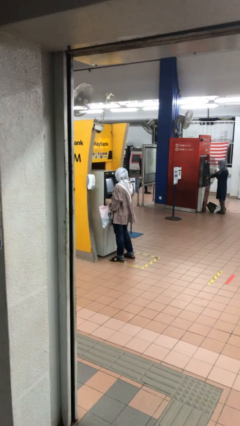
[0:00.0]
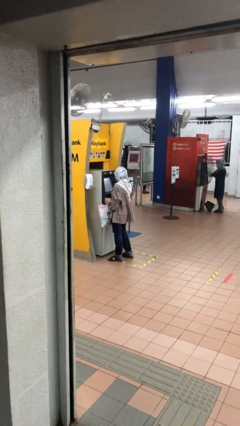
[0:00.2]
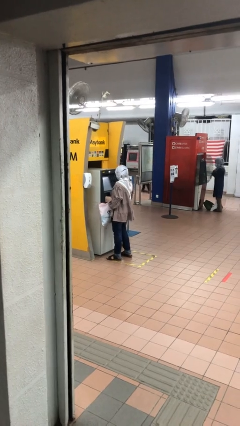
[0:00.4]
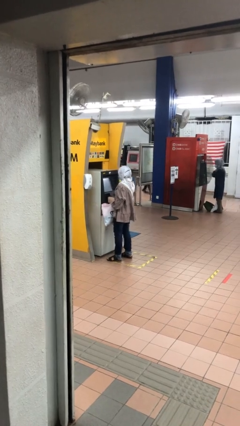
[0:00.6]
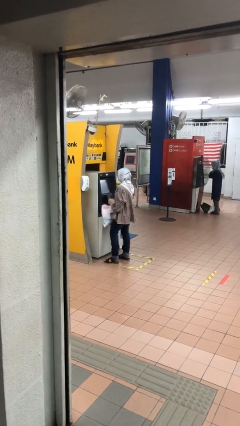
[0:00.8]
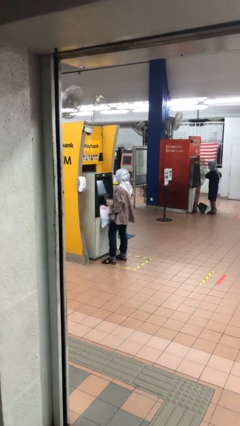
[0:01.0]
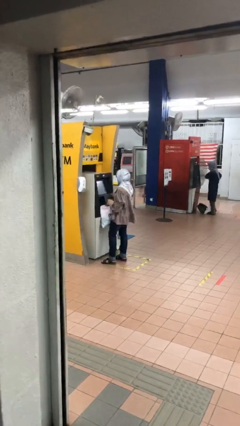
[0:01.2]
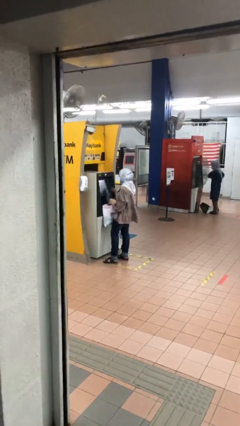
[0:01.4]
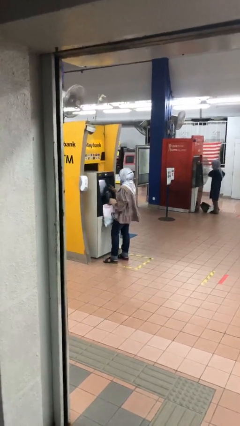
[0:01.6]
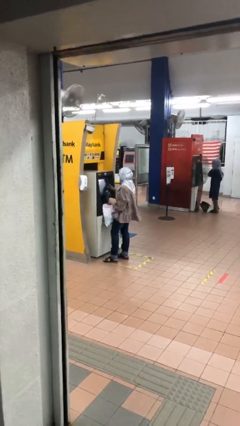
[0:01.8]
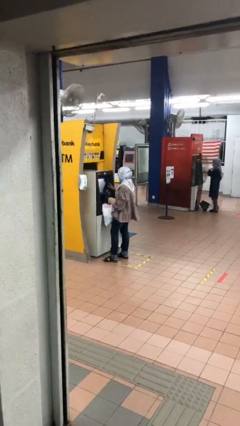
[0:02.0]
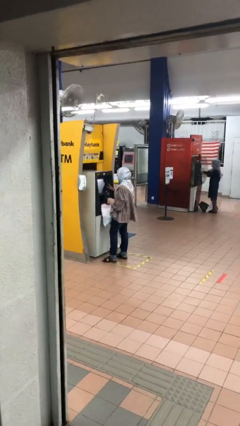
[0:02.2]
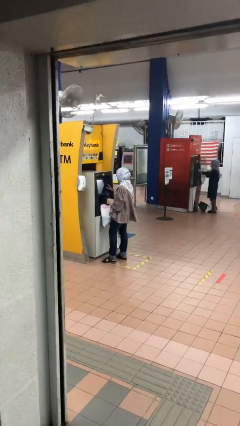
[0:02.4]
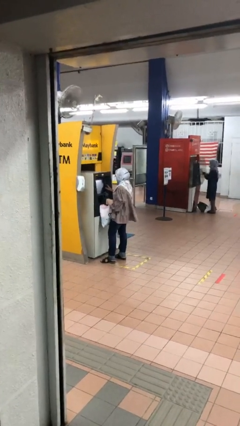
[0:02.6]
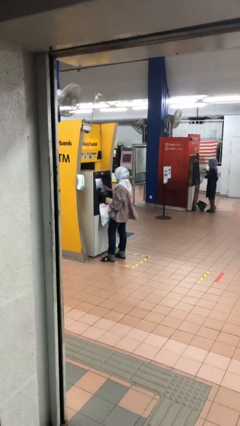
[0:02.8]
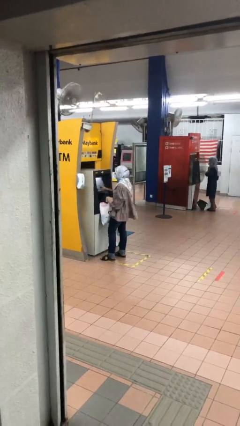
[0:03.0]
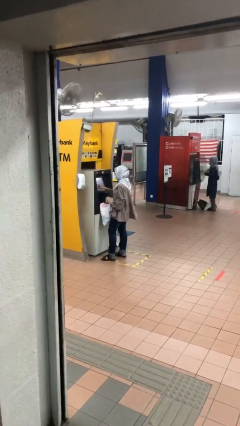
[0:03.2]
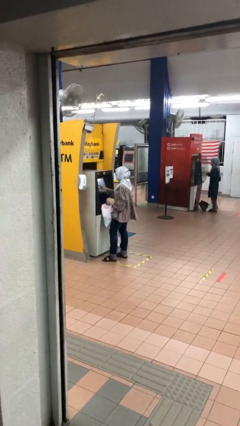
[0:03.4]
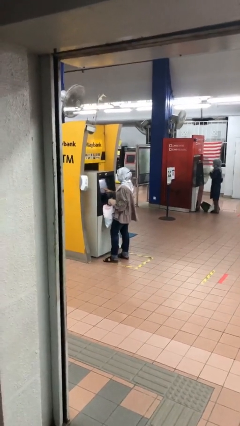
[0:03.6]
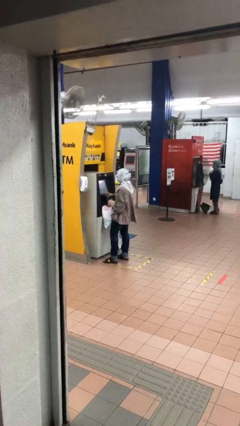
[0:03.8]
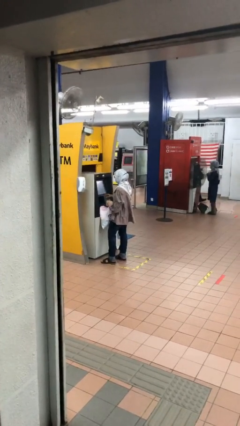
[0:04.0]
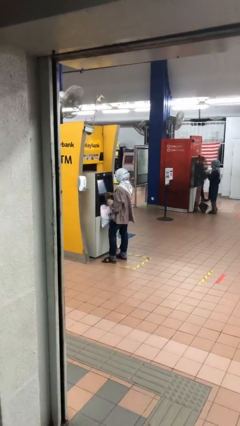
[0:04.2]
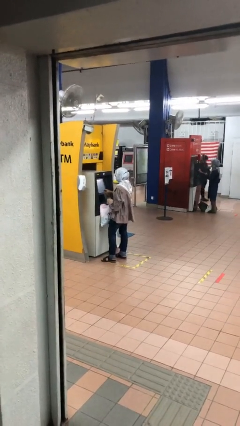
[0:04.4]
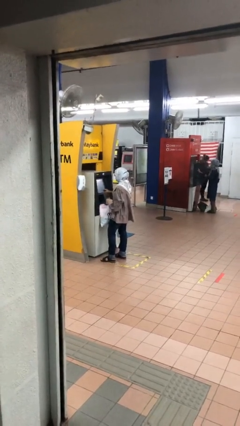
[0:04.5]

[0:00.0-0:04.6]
person purchases from machine

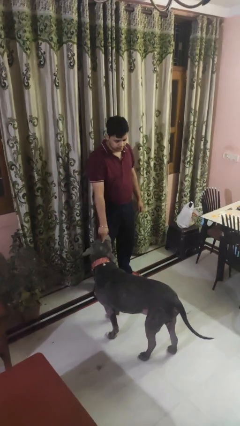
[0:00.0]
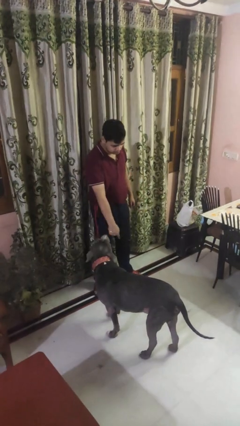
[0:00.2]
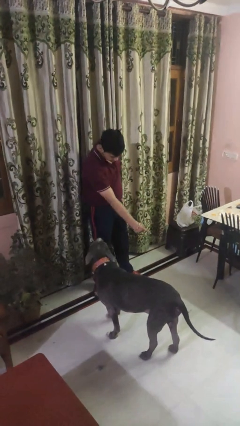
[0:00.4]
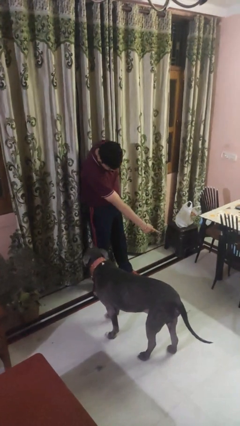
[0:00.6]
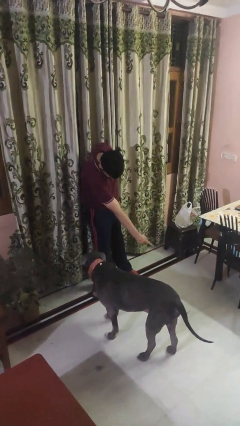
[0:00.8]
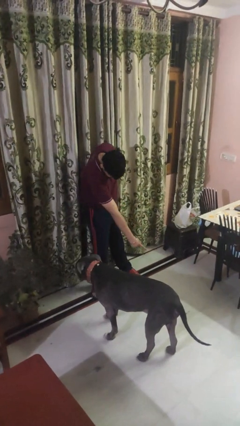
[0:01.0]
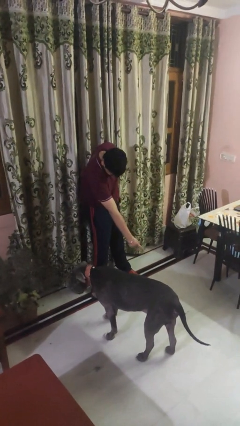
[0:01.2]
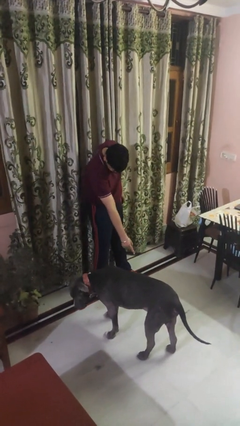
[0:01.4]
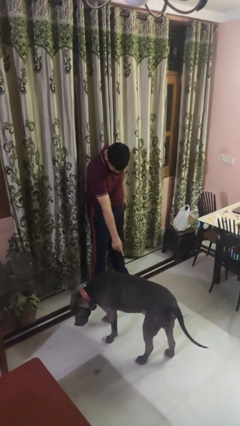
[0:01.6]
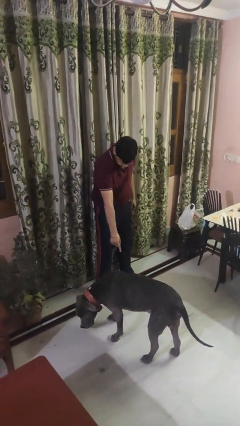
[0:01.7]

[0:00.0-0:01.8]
person points to dog

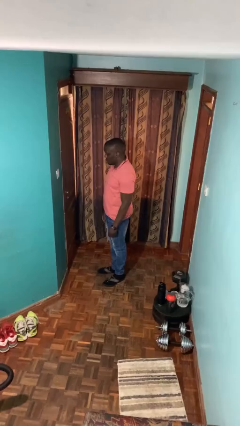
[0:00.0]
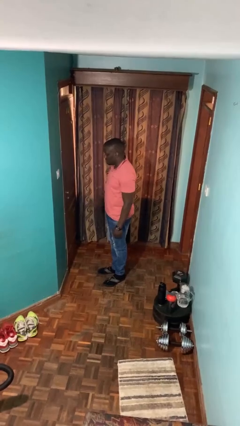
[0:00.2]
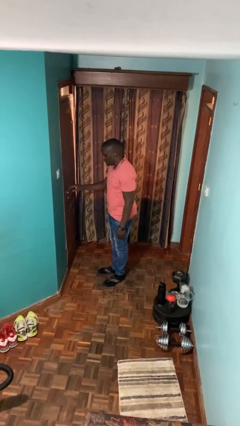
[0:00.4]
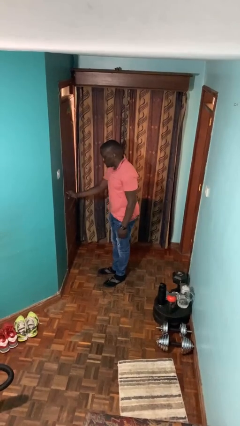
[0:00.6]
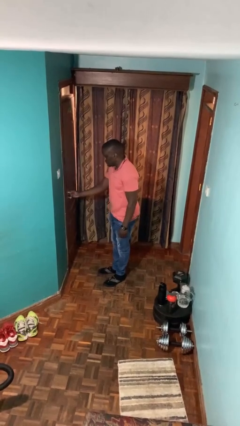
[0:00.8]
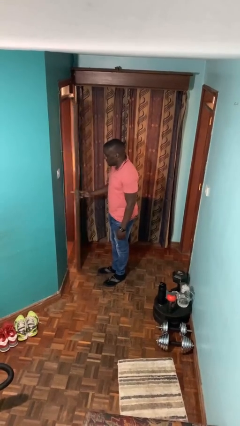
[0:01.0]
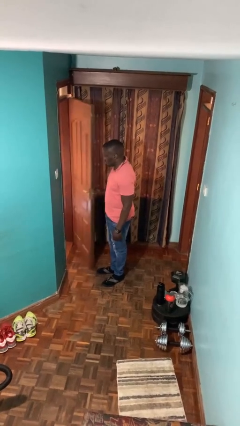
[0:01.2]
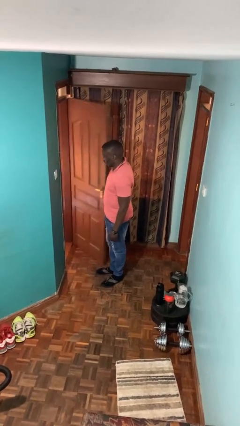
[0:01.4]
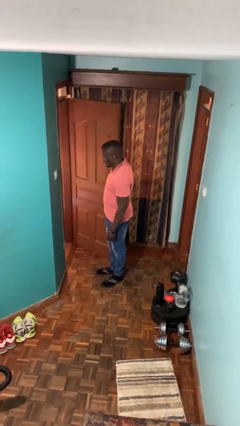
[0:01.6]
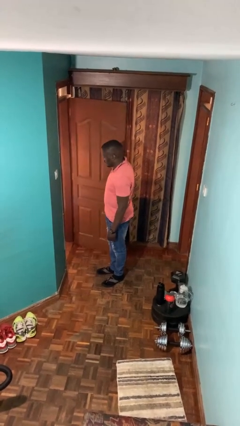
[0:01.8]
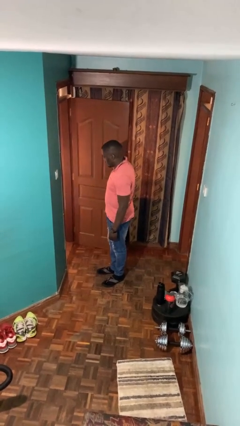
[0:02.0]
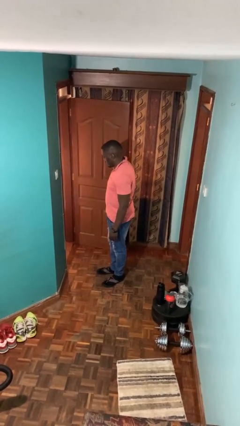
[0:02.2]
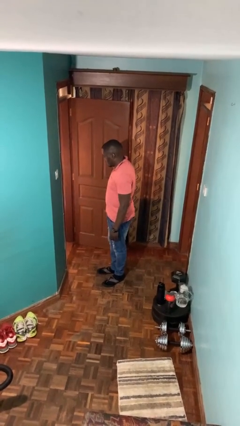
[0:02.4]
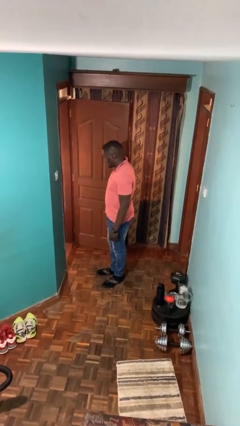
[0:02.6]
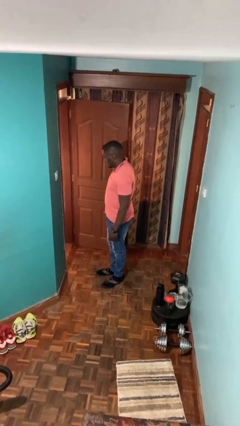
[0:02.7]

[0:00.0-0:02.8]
person opens facility door

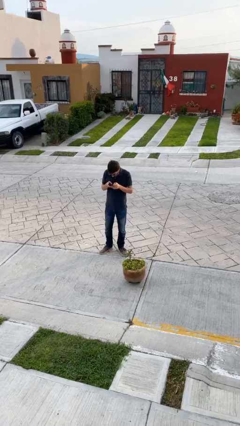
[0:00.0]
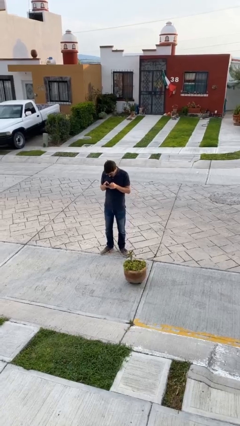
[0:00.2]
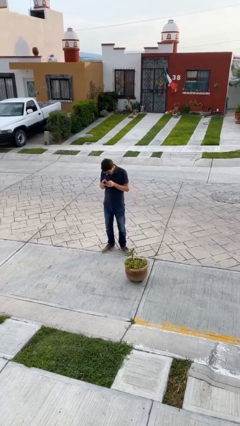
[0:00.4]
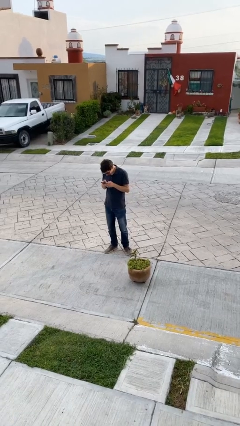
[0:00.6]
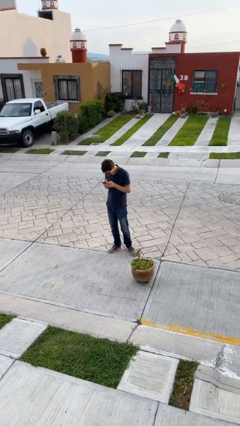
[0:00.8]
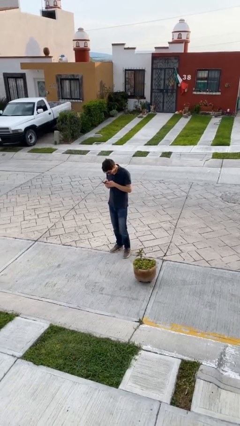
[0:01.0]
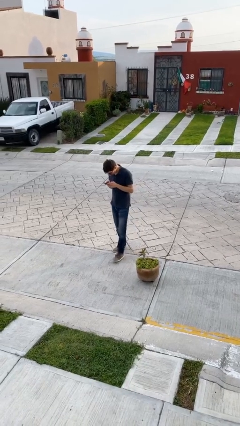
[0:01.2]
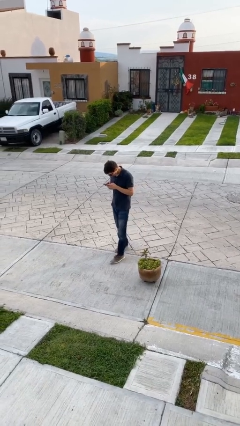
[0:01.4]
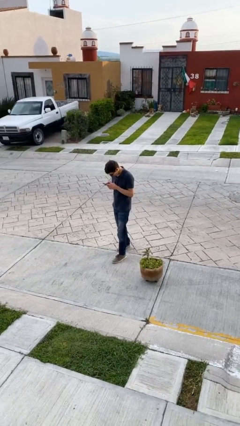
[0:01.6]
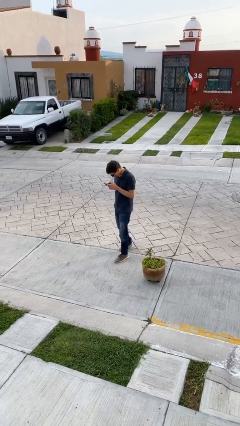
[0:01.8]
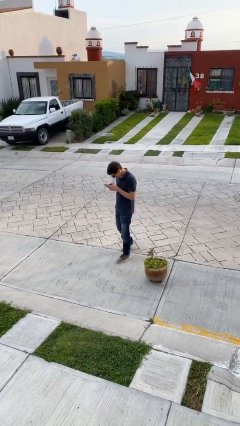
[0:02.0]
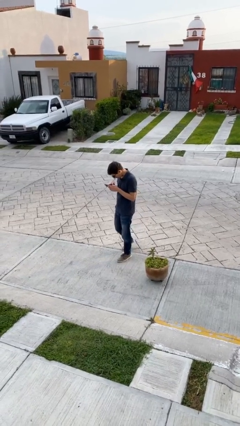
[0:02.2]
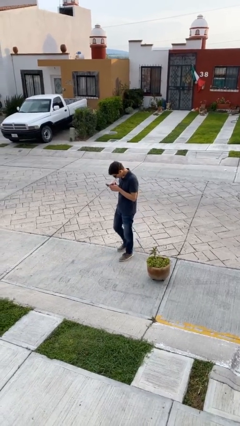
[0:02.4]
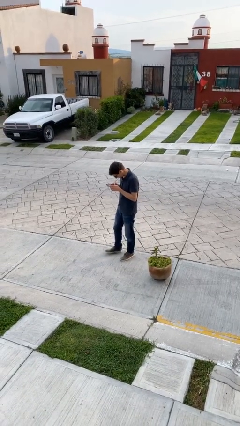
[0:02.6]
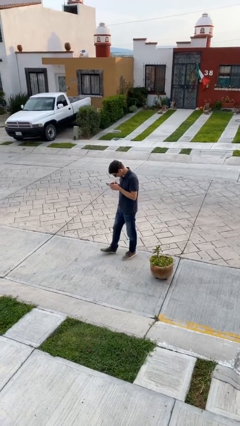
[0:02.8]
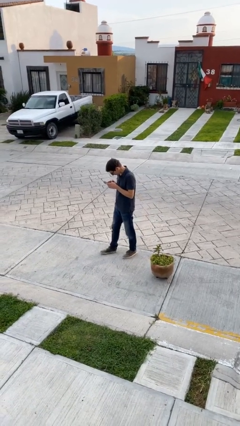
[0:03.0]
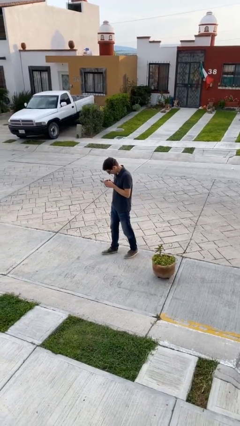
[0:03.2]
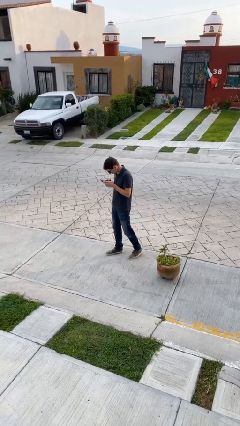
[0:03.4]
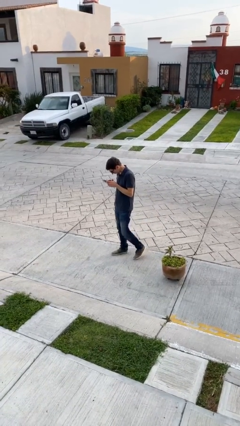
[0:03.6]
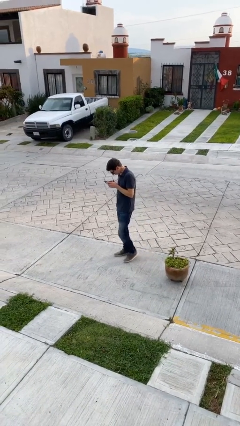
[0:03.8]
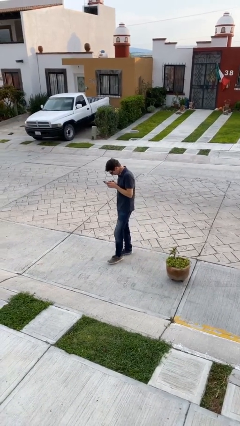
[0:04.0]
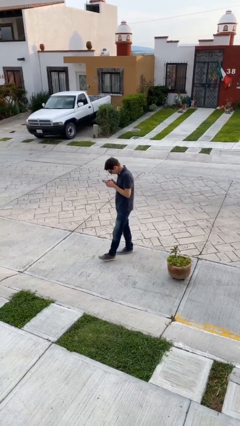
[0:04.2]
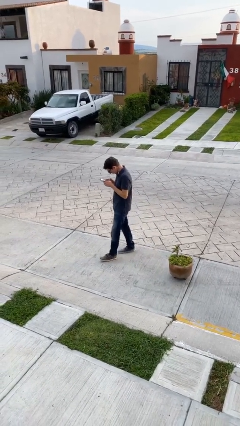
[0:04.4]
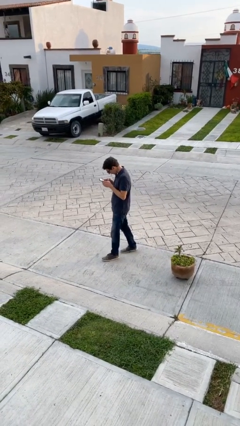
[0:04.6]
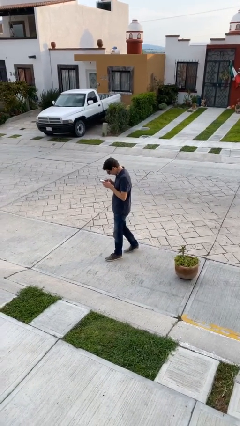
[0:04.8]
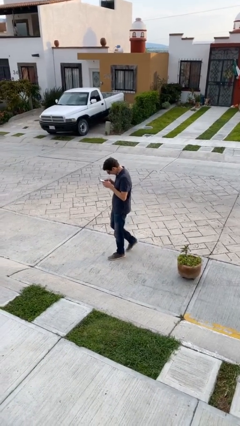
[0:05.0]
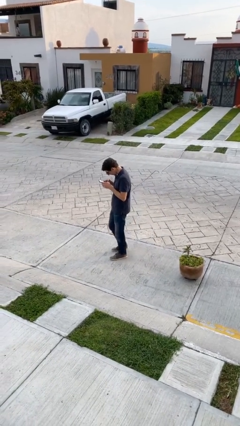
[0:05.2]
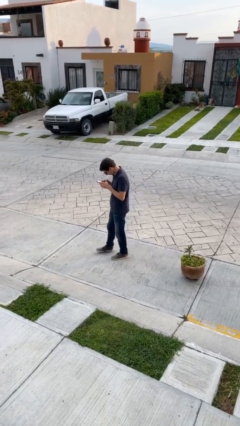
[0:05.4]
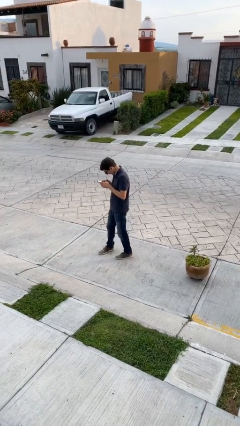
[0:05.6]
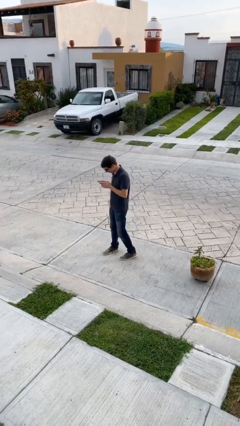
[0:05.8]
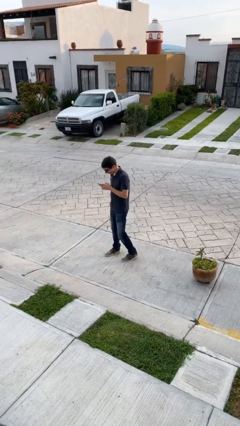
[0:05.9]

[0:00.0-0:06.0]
person texts on phone

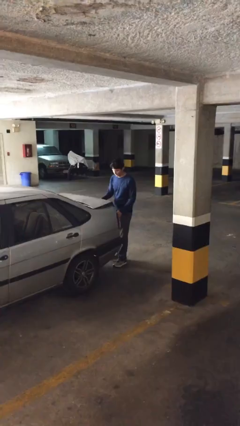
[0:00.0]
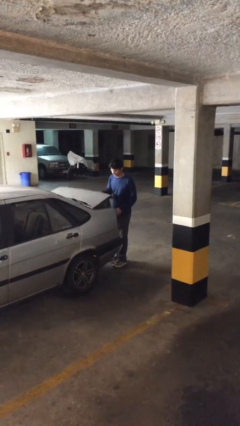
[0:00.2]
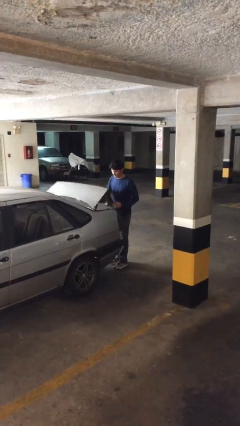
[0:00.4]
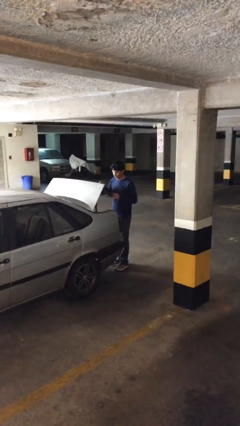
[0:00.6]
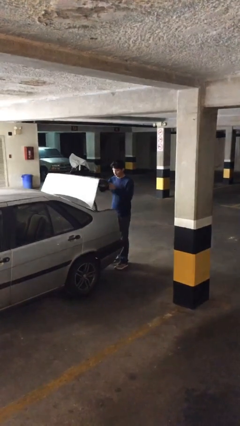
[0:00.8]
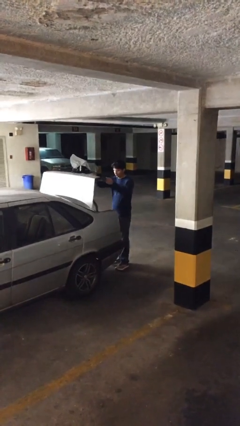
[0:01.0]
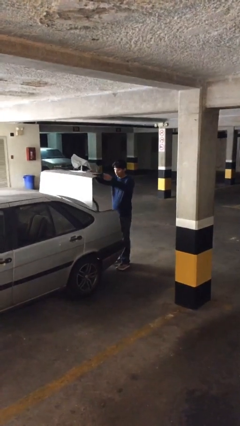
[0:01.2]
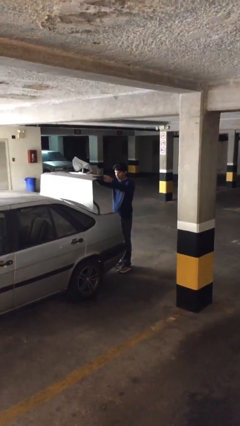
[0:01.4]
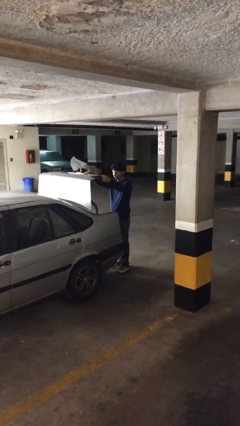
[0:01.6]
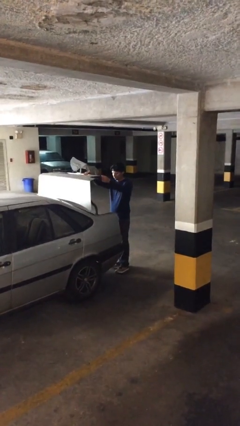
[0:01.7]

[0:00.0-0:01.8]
person opens car trunk

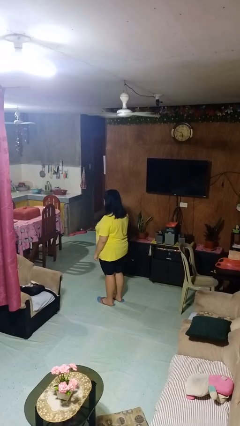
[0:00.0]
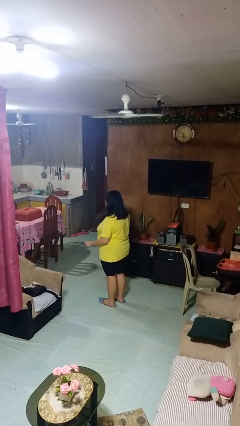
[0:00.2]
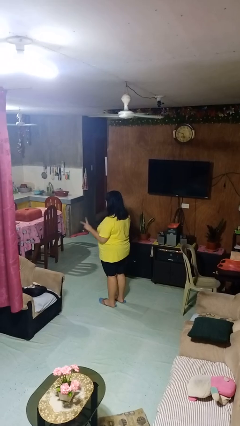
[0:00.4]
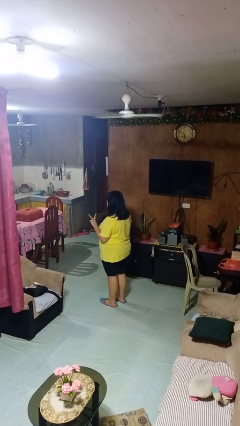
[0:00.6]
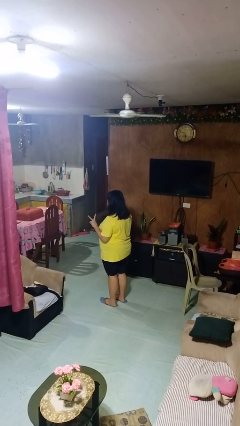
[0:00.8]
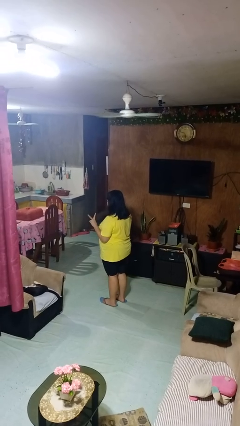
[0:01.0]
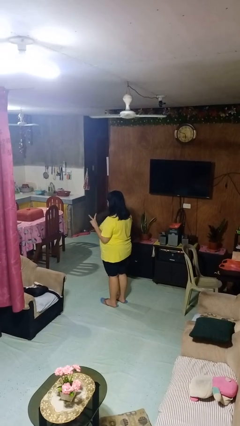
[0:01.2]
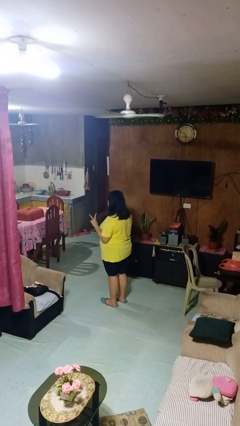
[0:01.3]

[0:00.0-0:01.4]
person gestures peace
